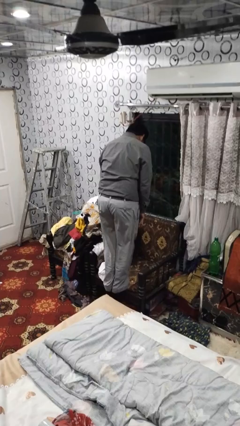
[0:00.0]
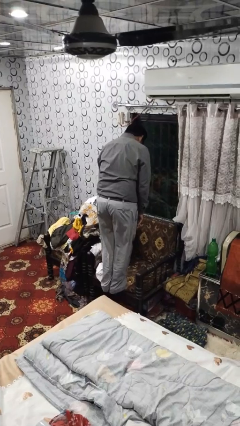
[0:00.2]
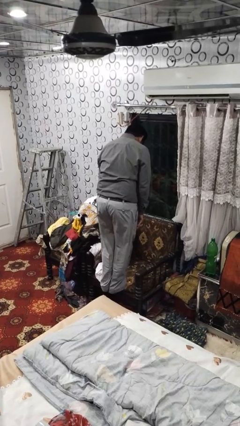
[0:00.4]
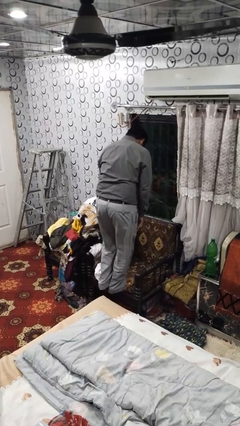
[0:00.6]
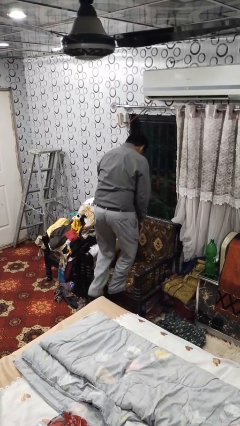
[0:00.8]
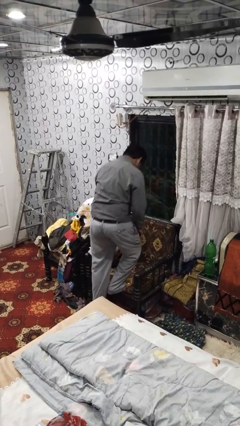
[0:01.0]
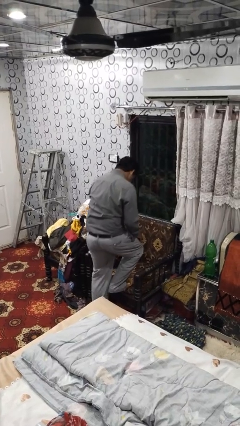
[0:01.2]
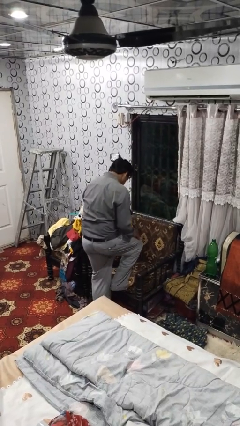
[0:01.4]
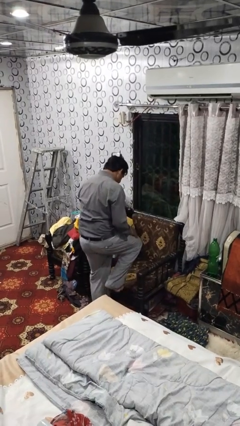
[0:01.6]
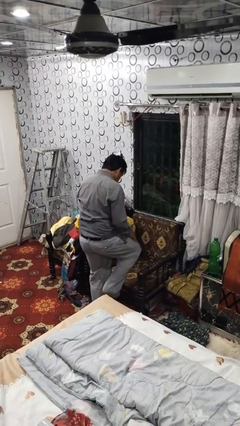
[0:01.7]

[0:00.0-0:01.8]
person climbs off couch

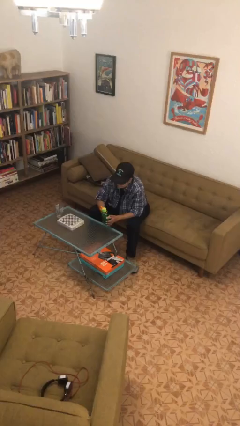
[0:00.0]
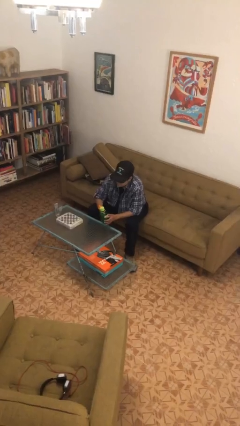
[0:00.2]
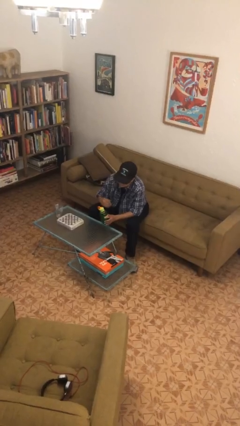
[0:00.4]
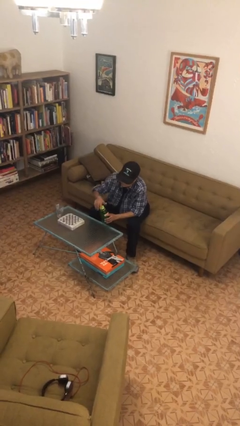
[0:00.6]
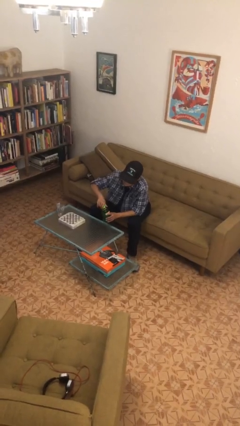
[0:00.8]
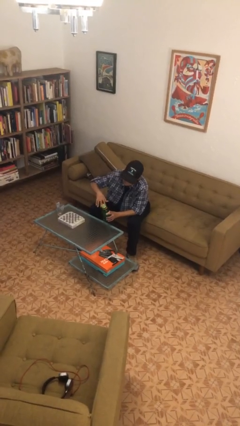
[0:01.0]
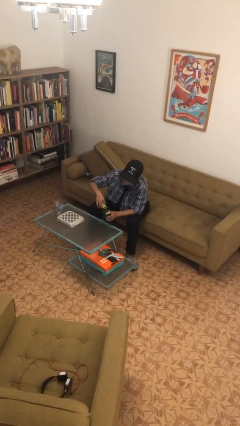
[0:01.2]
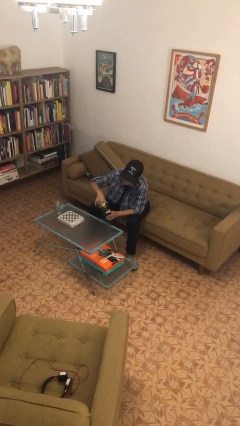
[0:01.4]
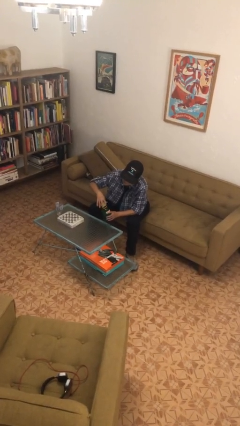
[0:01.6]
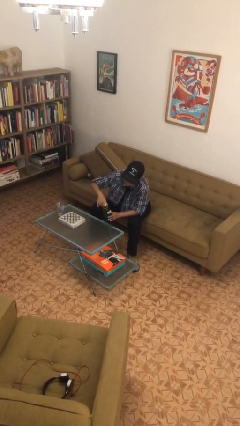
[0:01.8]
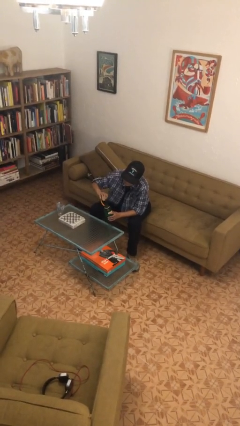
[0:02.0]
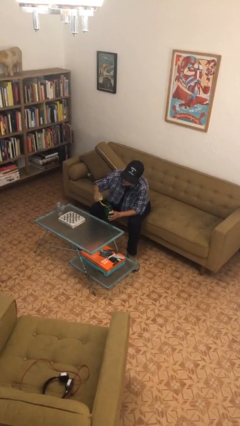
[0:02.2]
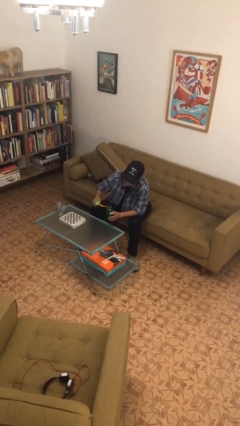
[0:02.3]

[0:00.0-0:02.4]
person unscrews lid from bottle

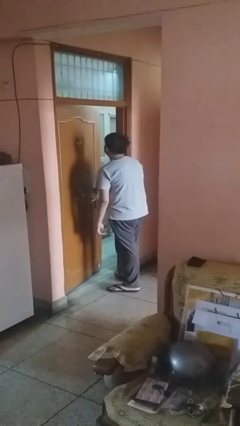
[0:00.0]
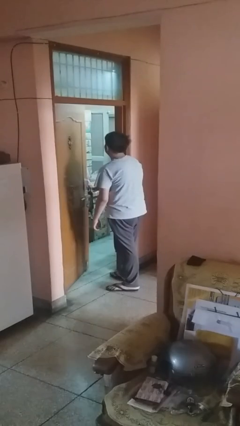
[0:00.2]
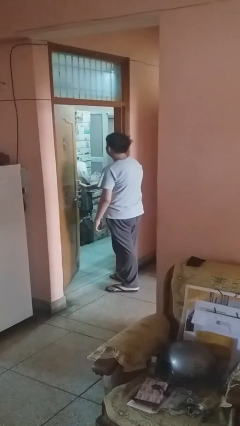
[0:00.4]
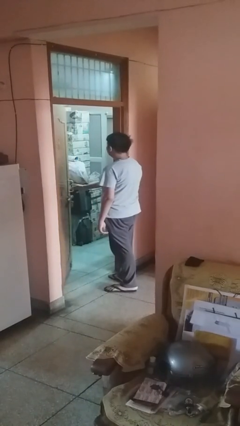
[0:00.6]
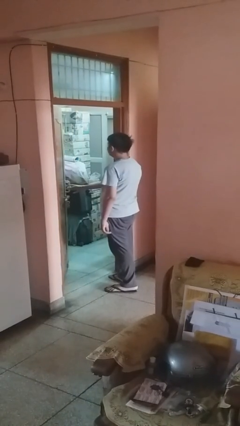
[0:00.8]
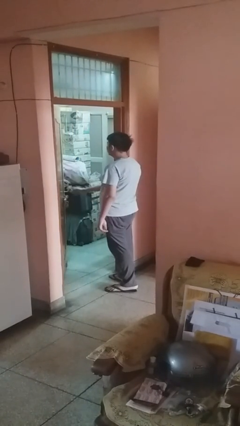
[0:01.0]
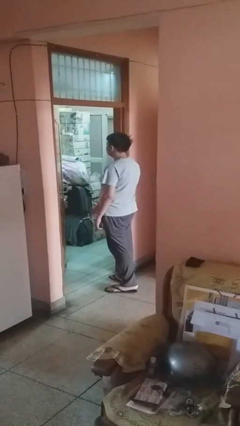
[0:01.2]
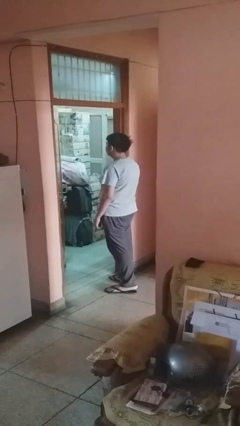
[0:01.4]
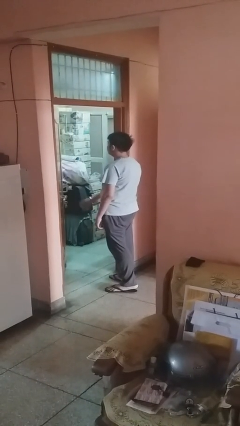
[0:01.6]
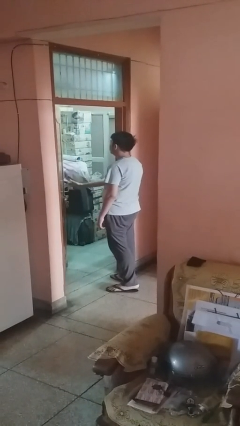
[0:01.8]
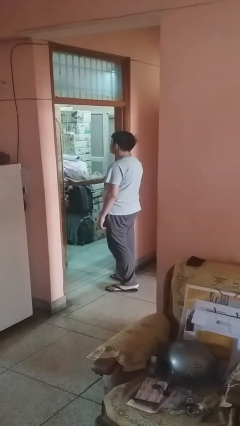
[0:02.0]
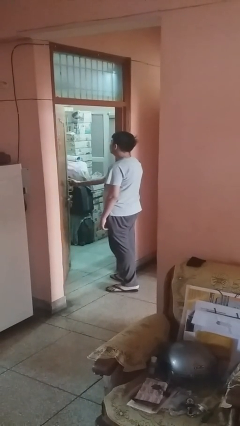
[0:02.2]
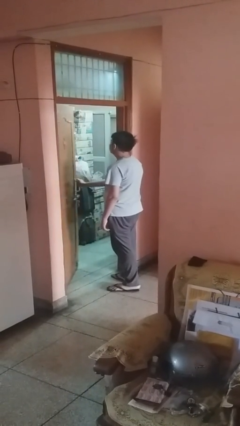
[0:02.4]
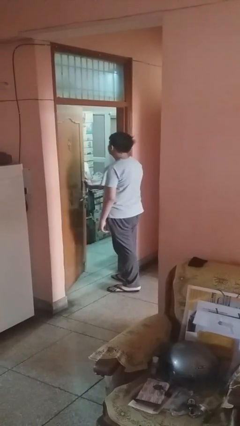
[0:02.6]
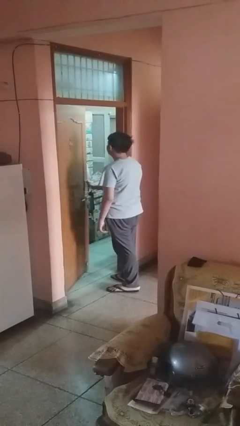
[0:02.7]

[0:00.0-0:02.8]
person opens facility door

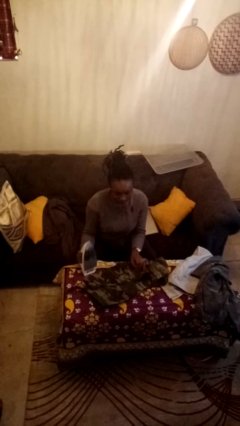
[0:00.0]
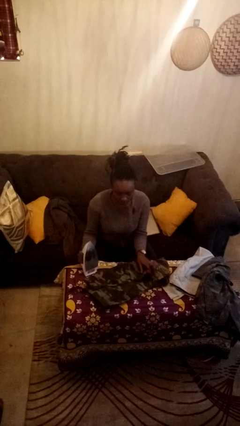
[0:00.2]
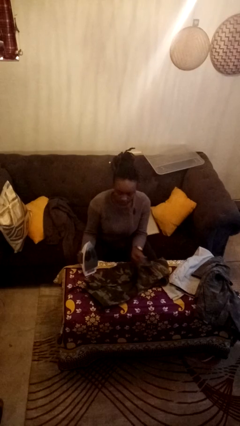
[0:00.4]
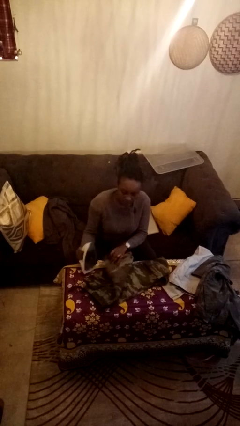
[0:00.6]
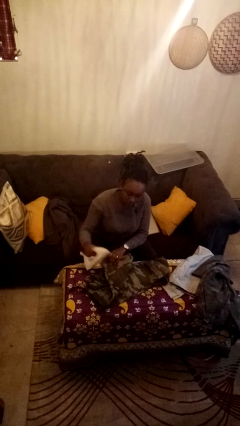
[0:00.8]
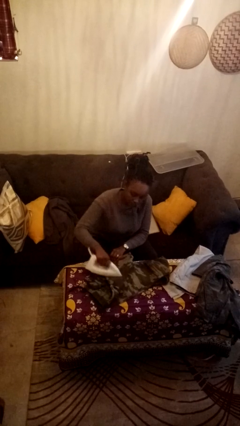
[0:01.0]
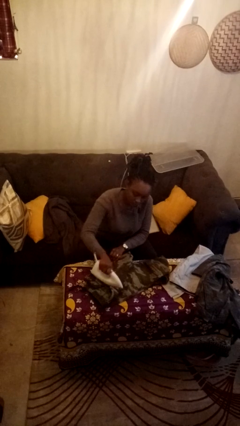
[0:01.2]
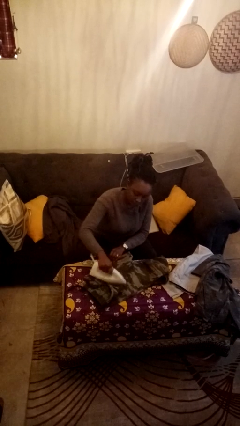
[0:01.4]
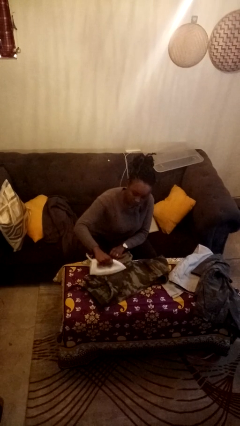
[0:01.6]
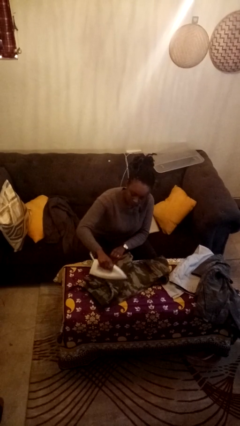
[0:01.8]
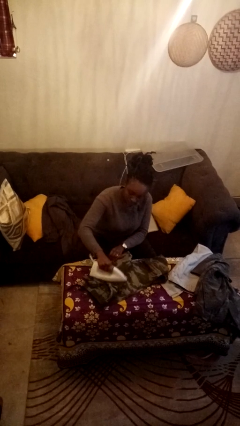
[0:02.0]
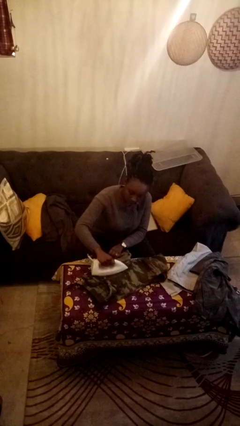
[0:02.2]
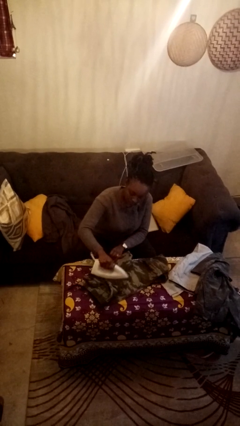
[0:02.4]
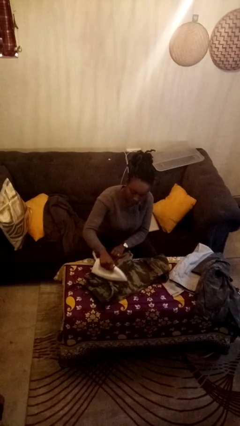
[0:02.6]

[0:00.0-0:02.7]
person irons clothes

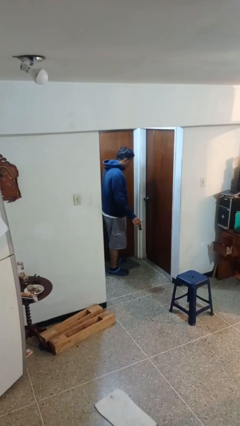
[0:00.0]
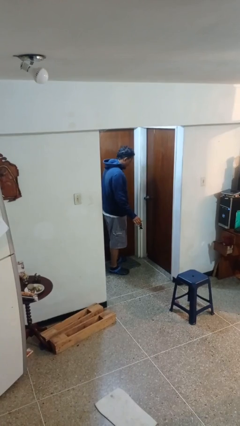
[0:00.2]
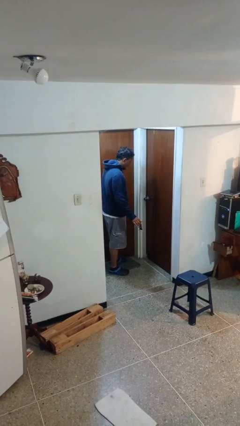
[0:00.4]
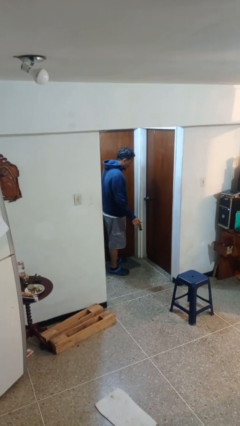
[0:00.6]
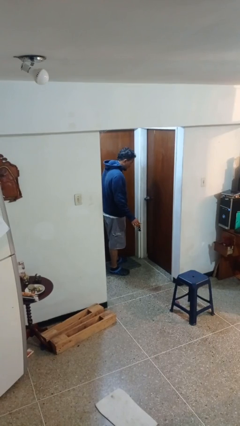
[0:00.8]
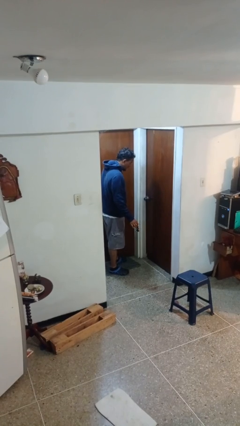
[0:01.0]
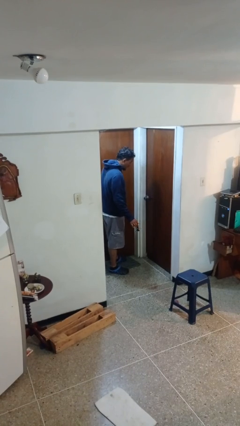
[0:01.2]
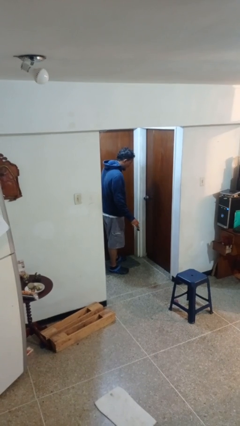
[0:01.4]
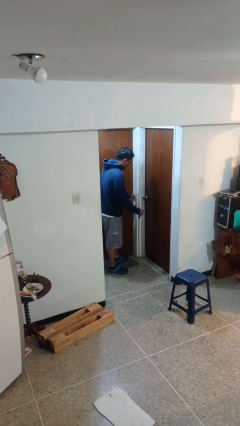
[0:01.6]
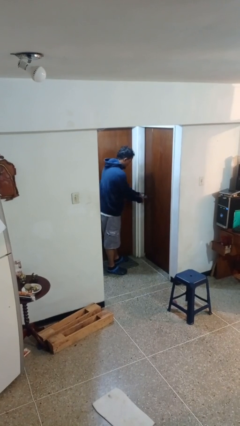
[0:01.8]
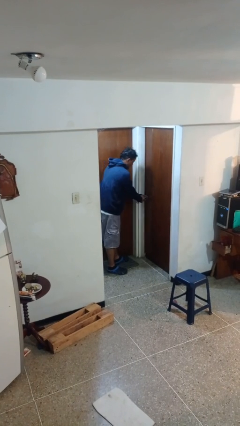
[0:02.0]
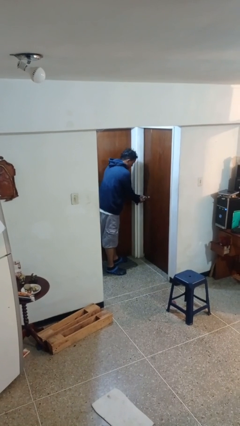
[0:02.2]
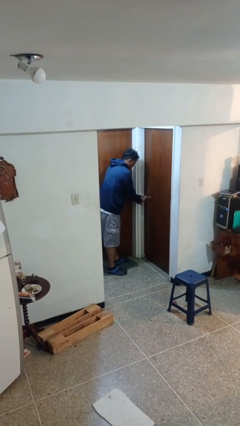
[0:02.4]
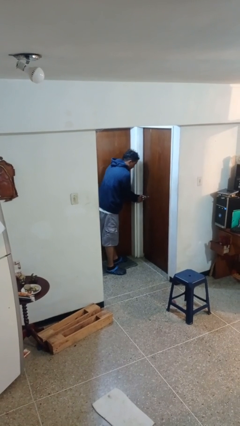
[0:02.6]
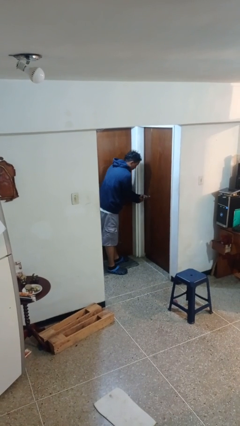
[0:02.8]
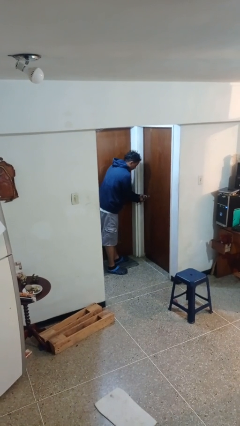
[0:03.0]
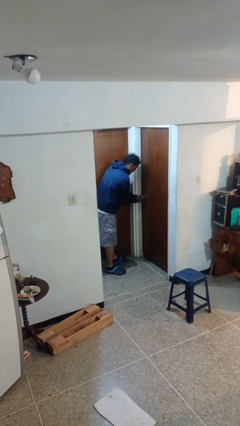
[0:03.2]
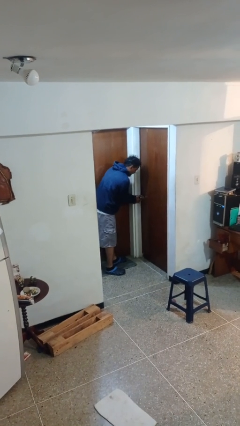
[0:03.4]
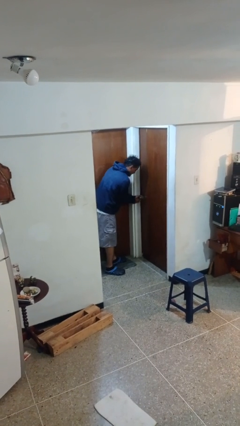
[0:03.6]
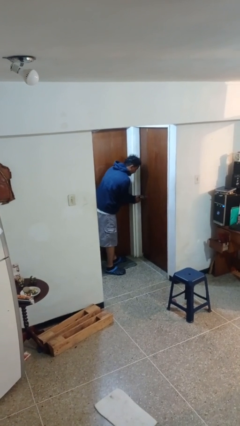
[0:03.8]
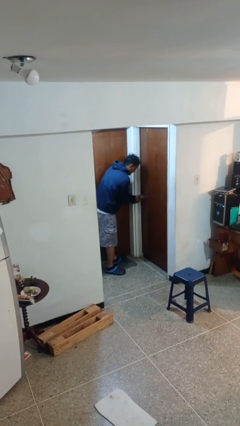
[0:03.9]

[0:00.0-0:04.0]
person unlocks door with keys

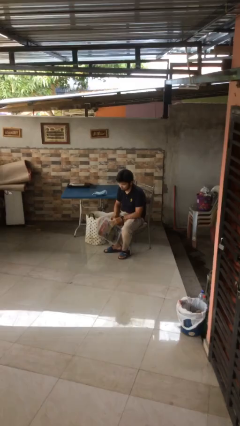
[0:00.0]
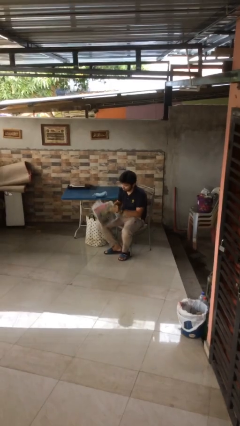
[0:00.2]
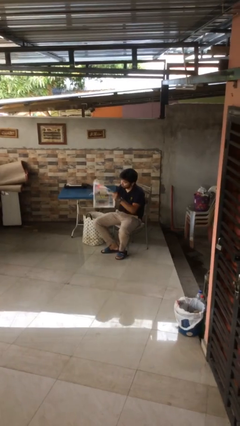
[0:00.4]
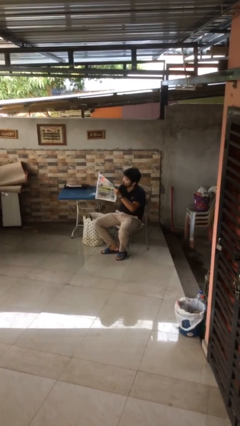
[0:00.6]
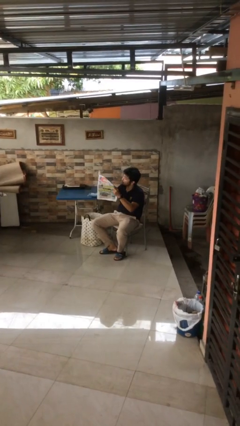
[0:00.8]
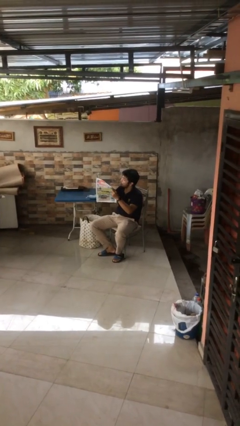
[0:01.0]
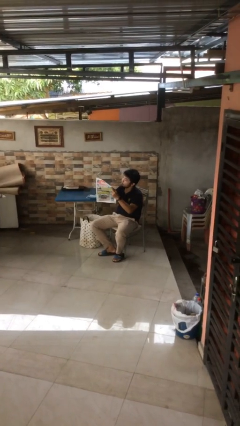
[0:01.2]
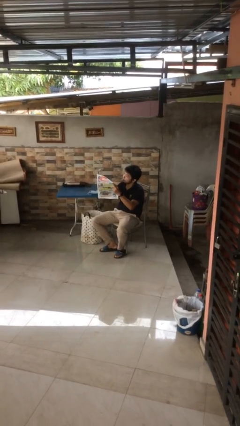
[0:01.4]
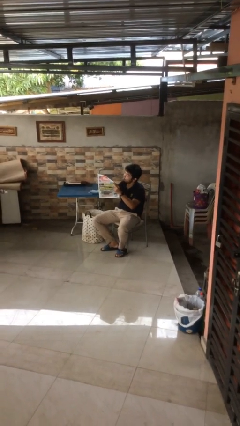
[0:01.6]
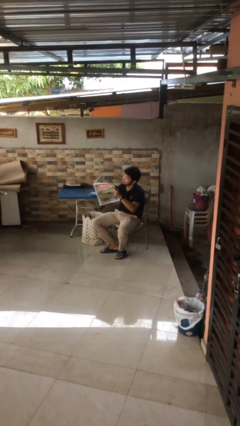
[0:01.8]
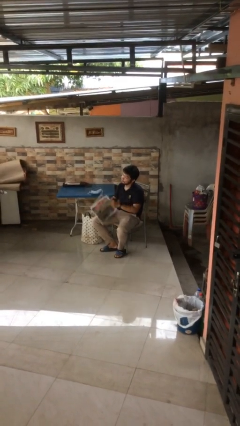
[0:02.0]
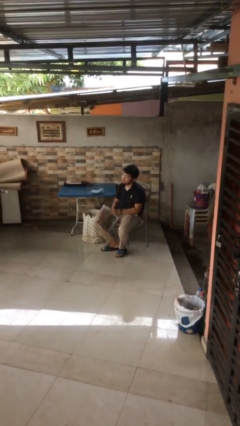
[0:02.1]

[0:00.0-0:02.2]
person reads newspaper

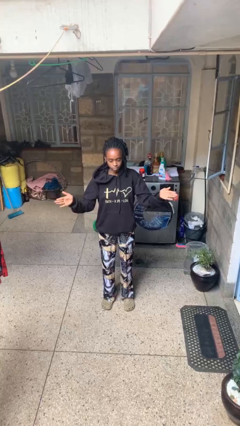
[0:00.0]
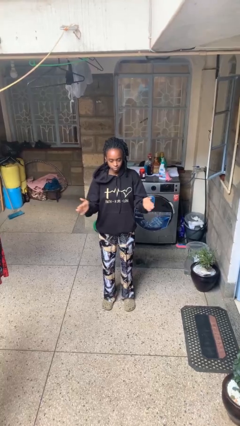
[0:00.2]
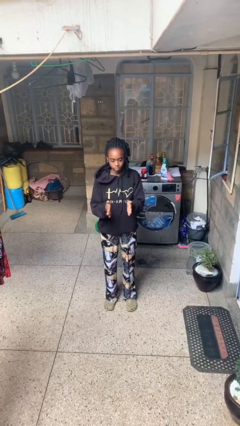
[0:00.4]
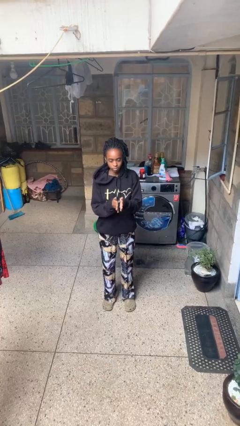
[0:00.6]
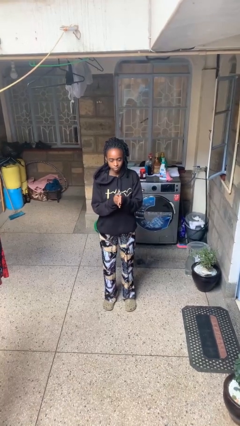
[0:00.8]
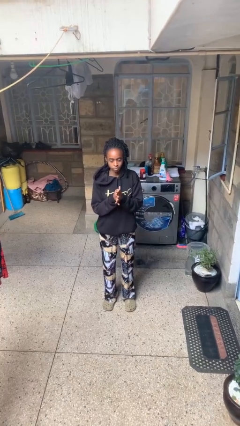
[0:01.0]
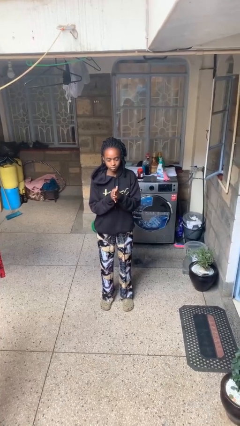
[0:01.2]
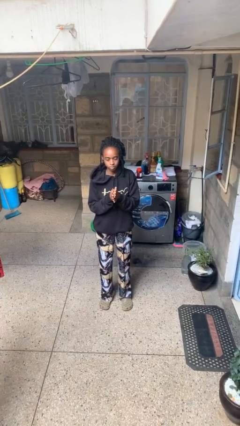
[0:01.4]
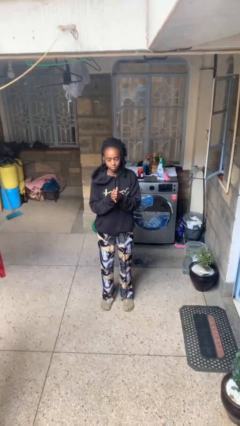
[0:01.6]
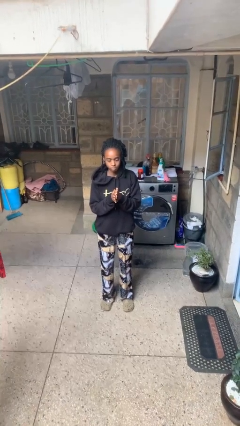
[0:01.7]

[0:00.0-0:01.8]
person gestures zoom out
